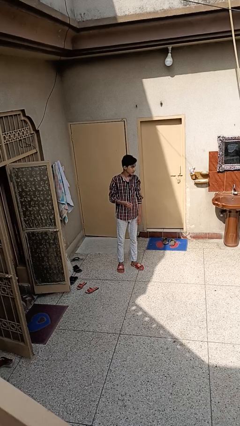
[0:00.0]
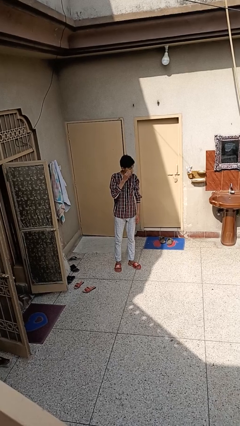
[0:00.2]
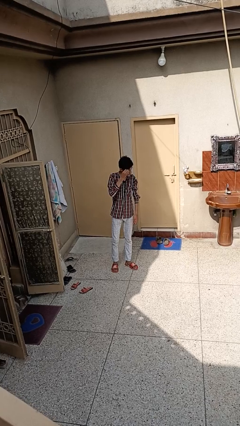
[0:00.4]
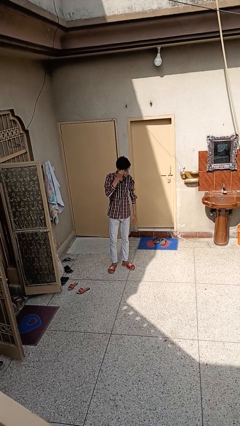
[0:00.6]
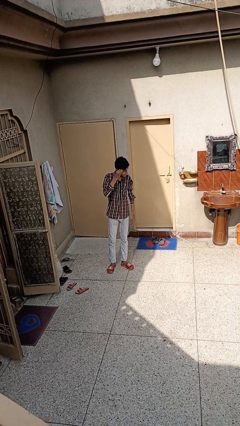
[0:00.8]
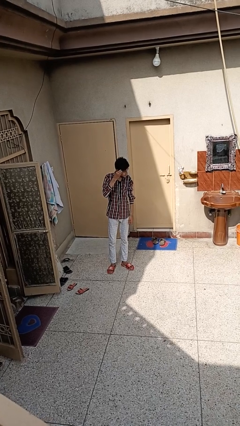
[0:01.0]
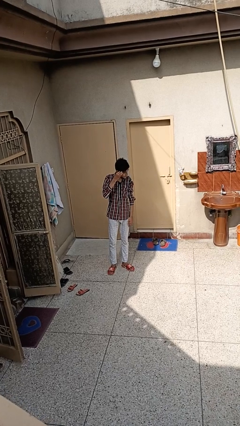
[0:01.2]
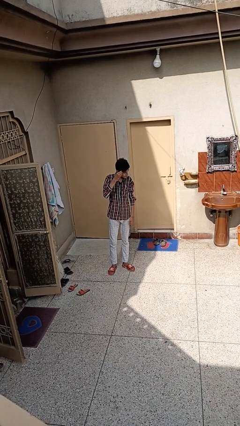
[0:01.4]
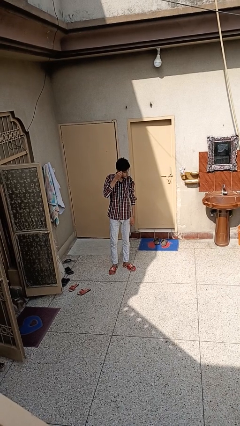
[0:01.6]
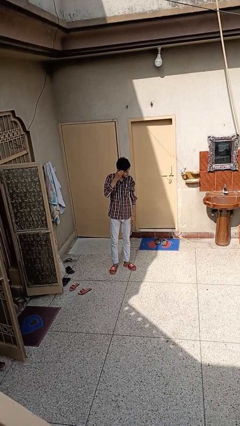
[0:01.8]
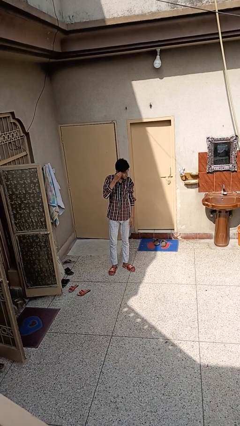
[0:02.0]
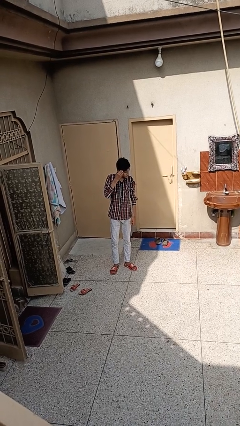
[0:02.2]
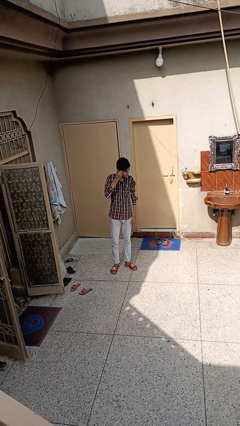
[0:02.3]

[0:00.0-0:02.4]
person scratches face

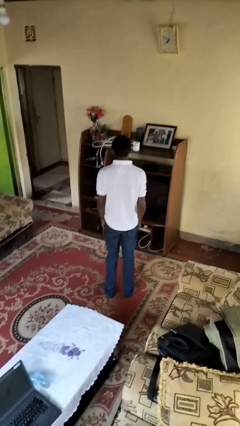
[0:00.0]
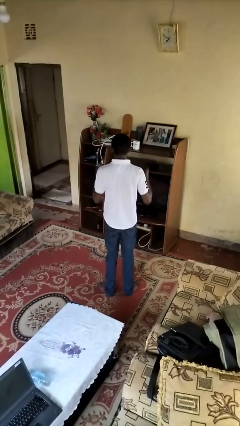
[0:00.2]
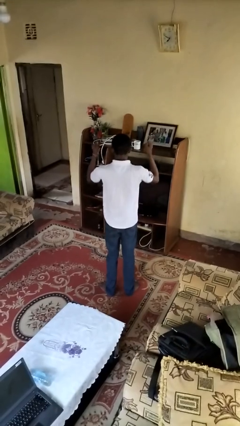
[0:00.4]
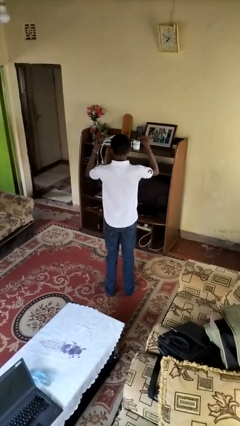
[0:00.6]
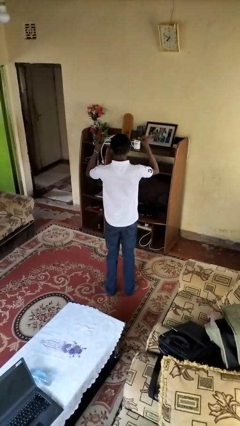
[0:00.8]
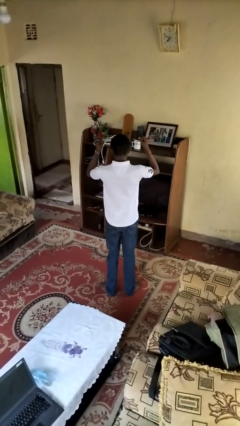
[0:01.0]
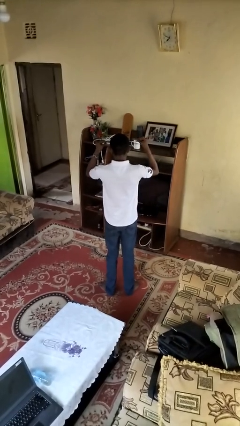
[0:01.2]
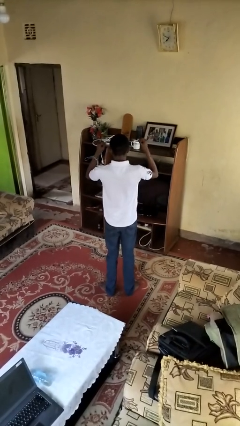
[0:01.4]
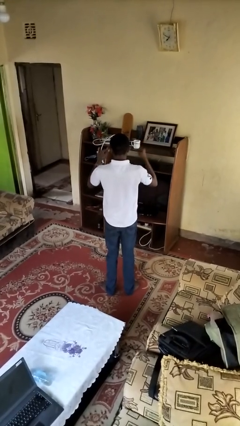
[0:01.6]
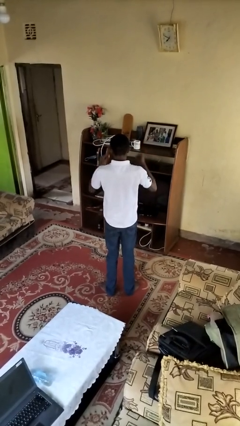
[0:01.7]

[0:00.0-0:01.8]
person snaps fingers

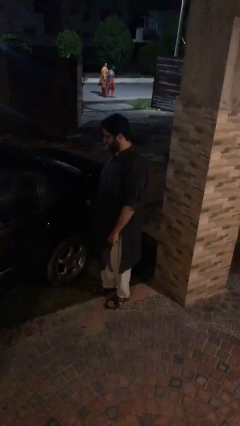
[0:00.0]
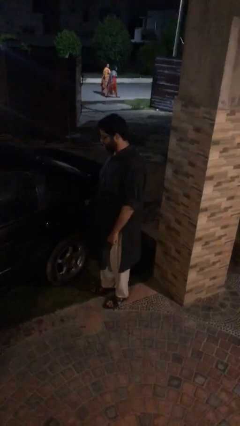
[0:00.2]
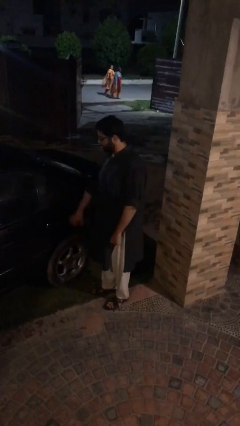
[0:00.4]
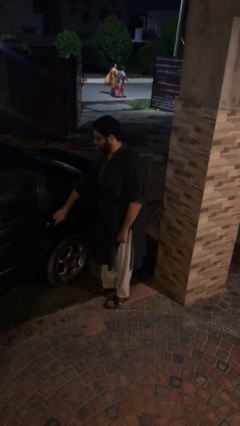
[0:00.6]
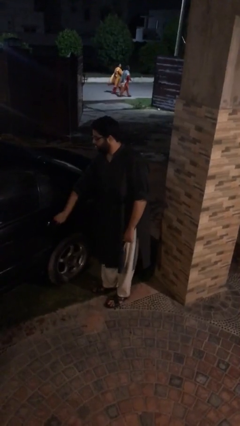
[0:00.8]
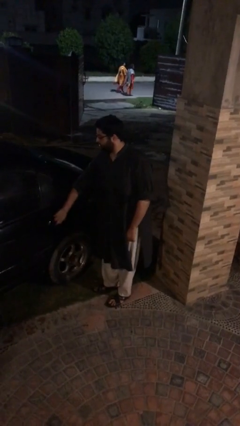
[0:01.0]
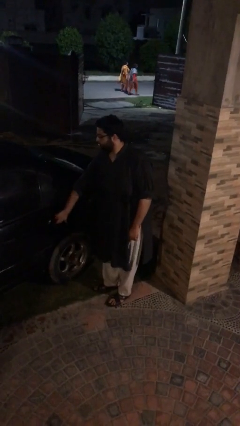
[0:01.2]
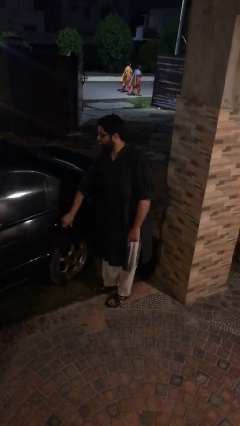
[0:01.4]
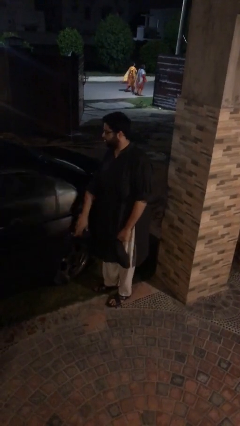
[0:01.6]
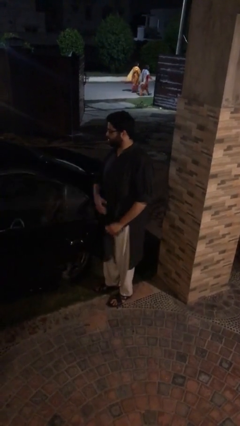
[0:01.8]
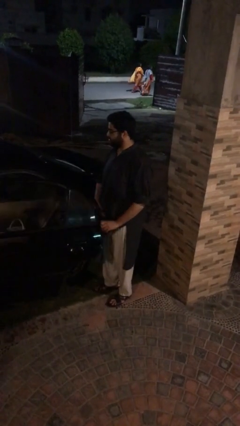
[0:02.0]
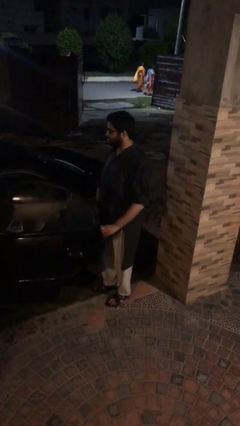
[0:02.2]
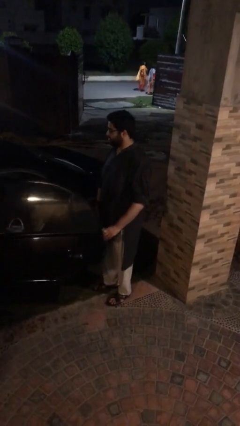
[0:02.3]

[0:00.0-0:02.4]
person opens car door

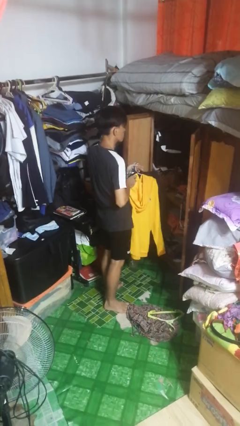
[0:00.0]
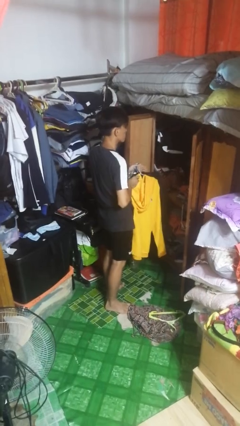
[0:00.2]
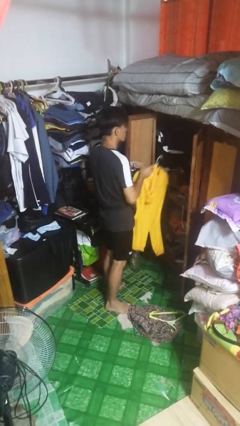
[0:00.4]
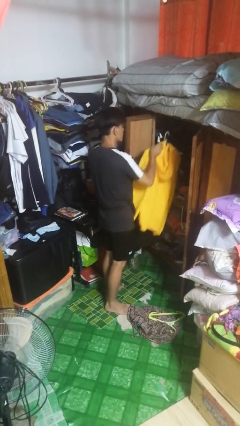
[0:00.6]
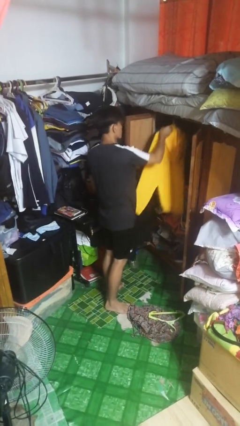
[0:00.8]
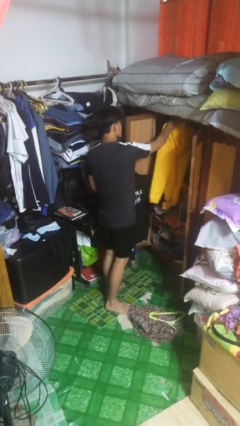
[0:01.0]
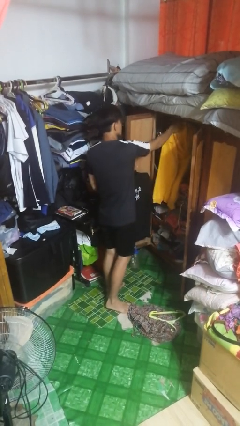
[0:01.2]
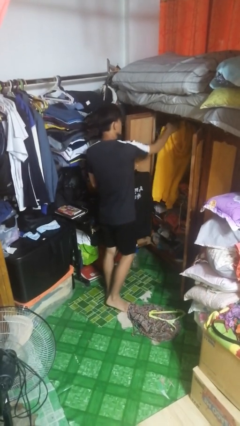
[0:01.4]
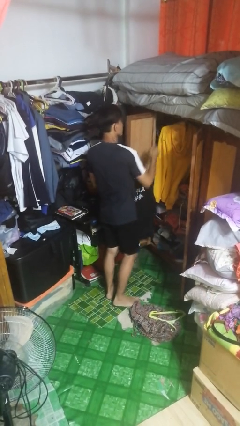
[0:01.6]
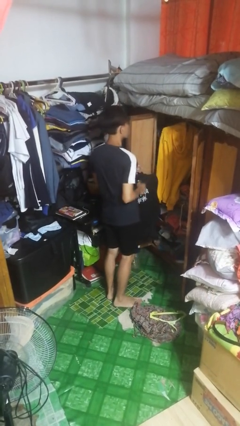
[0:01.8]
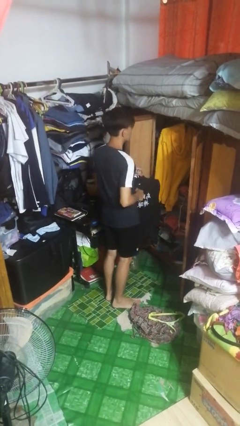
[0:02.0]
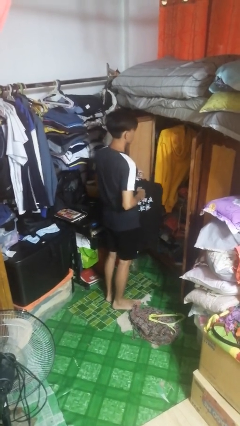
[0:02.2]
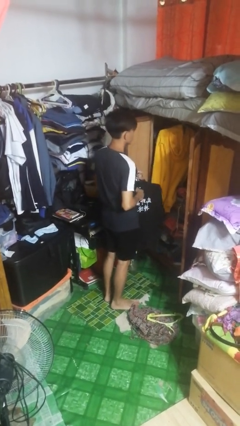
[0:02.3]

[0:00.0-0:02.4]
person puts clothes into closet

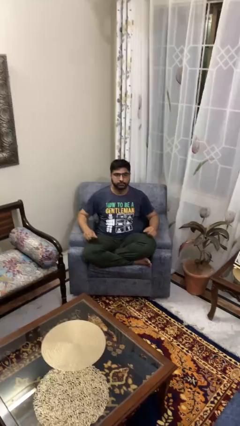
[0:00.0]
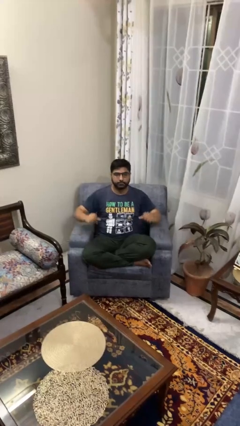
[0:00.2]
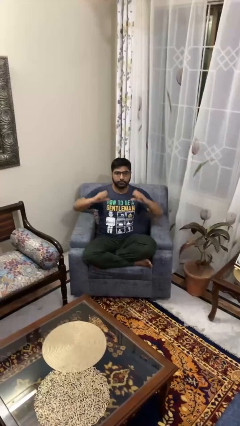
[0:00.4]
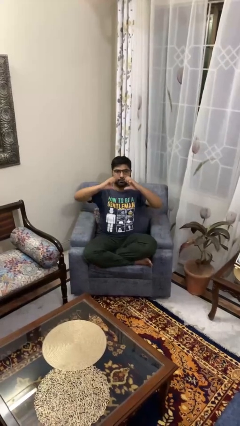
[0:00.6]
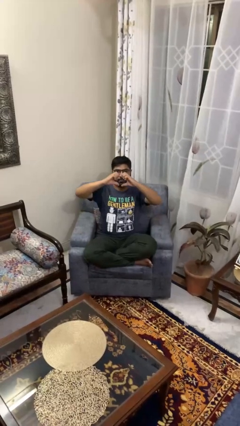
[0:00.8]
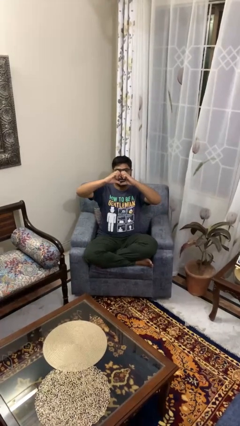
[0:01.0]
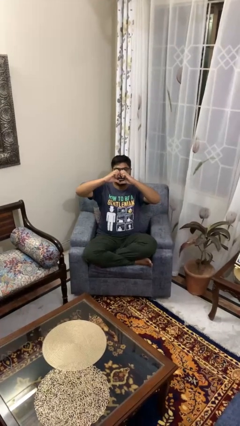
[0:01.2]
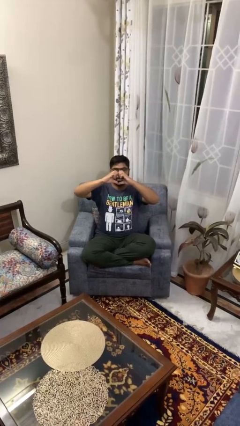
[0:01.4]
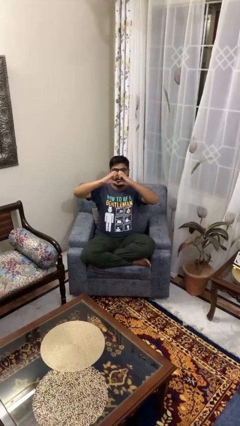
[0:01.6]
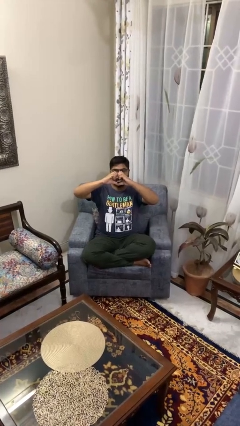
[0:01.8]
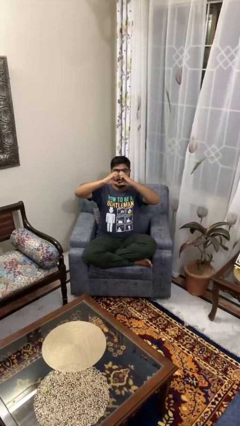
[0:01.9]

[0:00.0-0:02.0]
person gestures heart

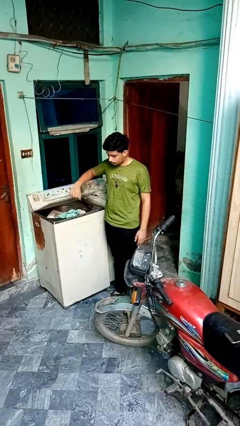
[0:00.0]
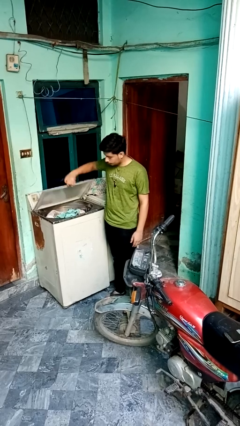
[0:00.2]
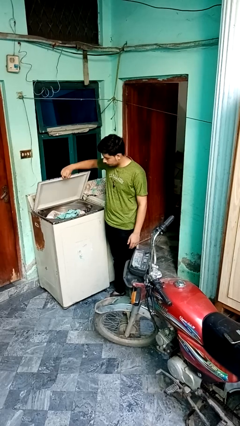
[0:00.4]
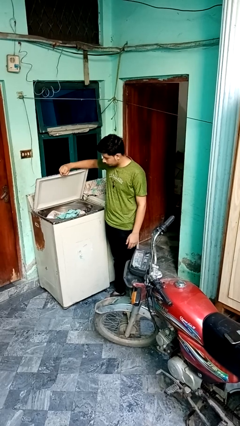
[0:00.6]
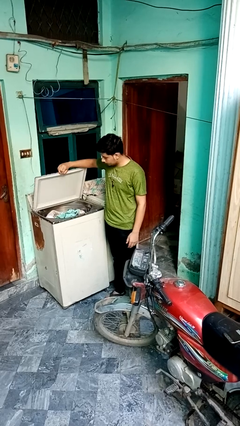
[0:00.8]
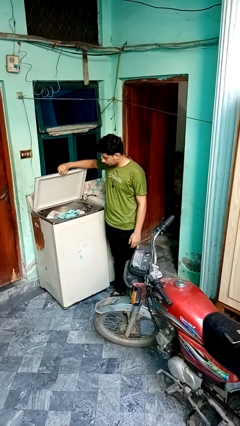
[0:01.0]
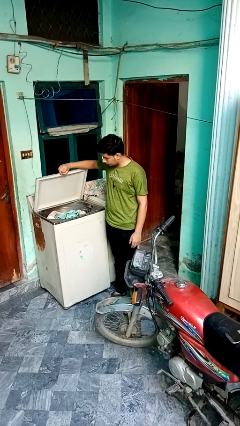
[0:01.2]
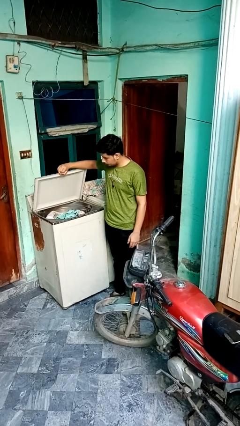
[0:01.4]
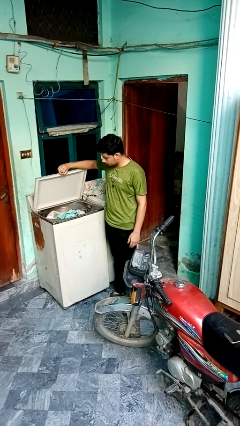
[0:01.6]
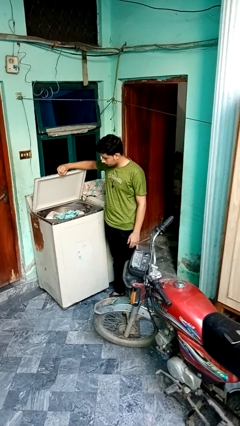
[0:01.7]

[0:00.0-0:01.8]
person opens clothes washer

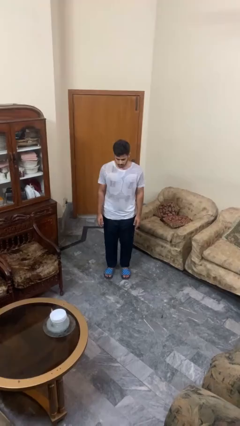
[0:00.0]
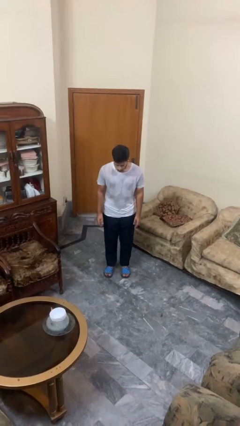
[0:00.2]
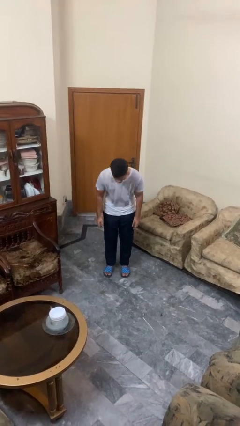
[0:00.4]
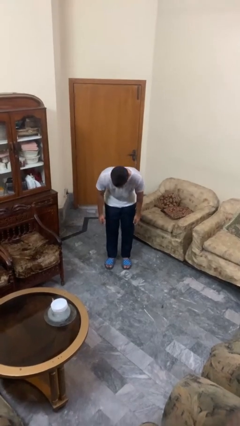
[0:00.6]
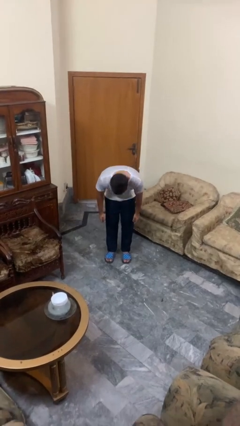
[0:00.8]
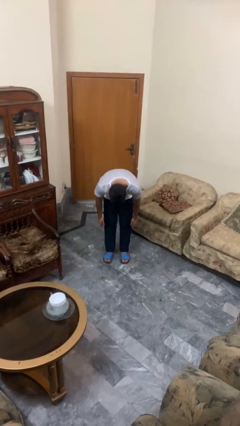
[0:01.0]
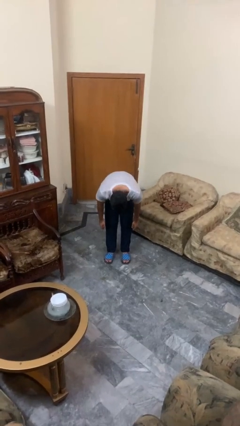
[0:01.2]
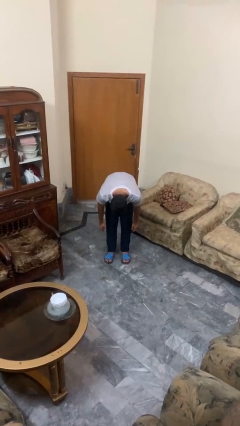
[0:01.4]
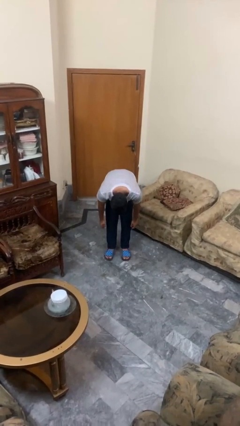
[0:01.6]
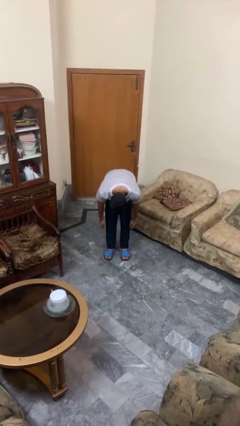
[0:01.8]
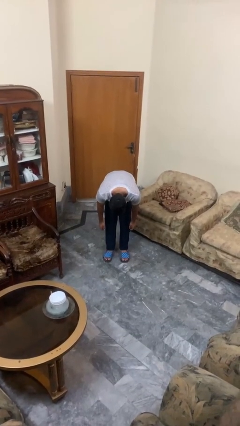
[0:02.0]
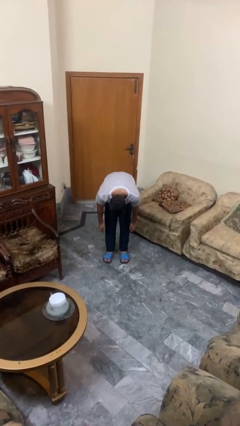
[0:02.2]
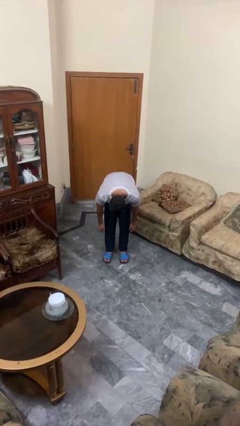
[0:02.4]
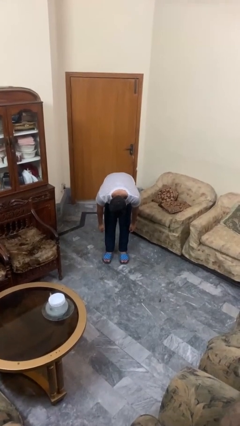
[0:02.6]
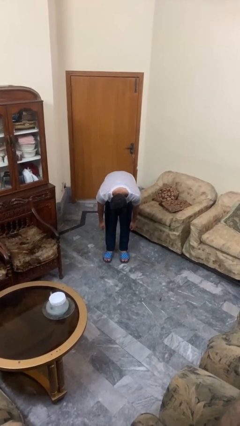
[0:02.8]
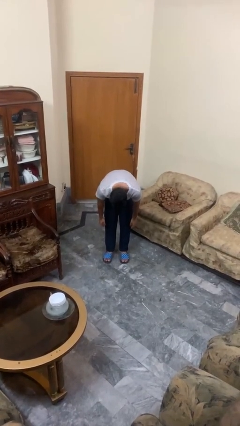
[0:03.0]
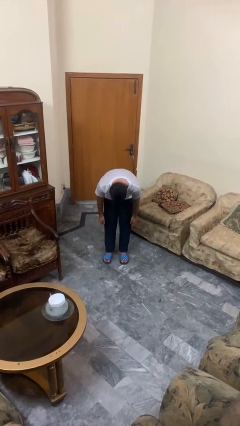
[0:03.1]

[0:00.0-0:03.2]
person bows

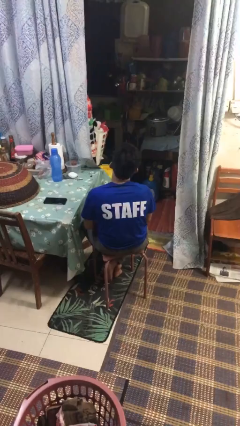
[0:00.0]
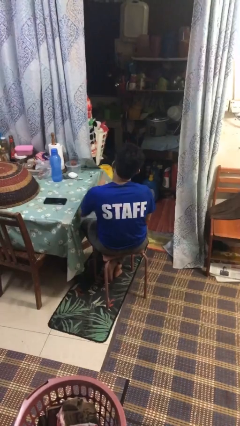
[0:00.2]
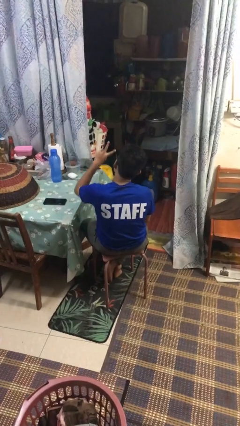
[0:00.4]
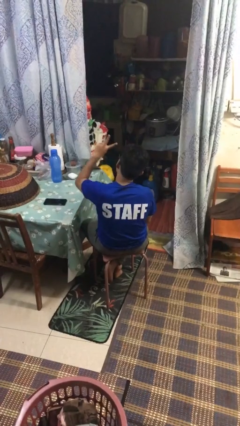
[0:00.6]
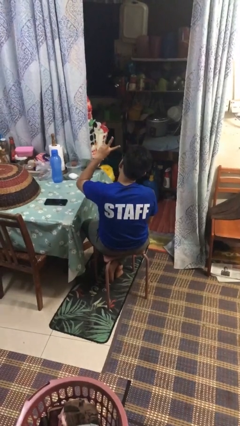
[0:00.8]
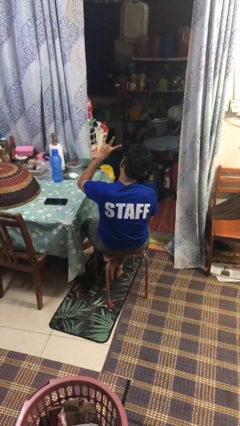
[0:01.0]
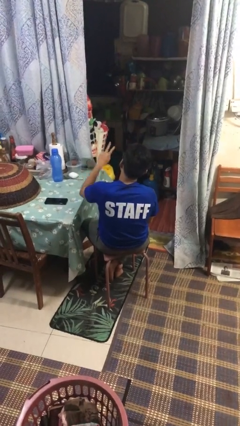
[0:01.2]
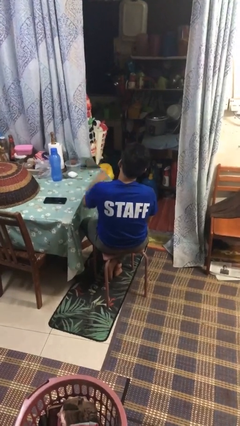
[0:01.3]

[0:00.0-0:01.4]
person gestures peace
